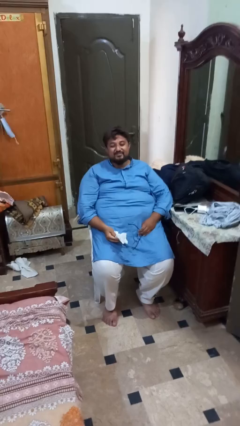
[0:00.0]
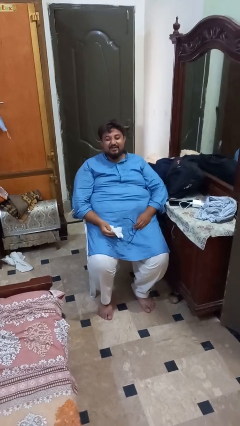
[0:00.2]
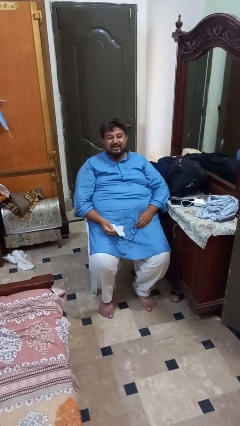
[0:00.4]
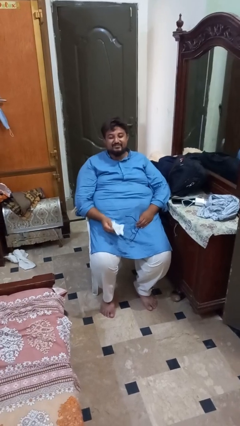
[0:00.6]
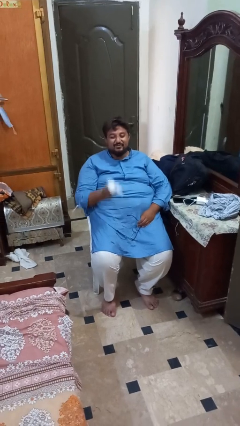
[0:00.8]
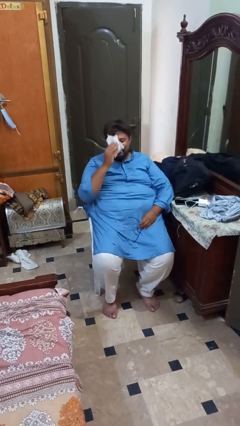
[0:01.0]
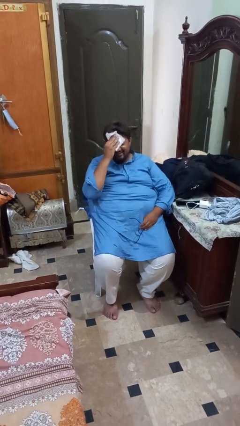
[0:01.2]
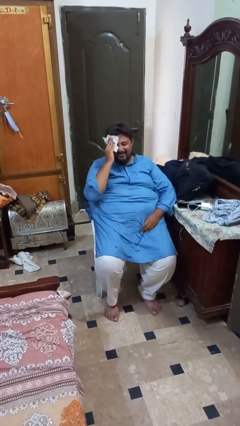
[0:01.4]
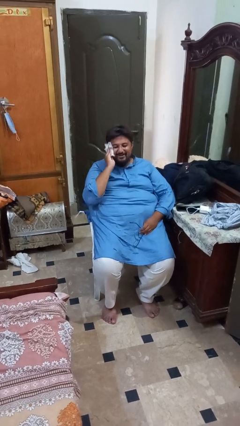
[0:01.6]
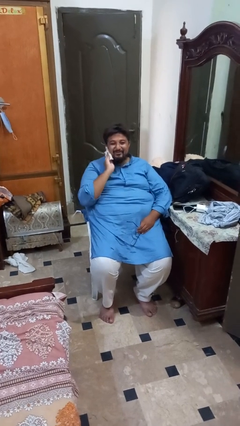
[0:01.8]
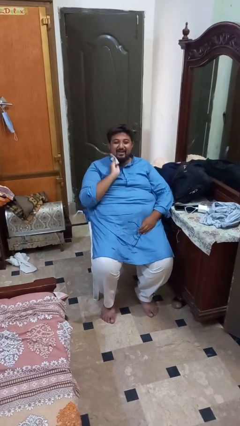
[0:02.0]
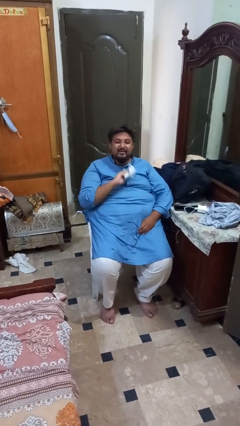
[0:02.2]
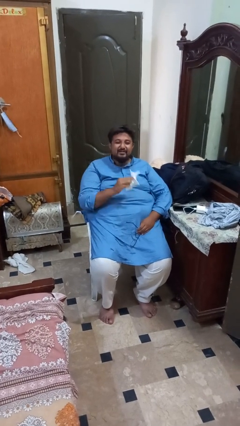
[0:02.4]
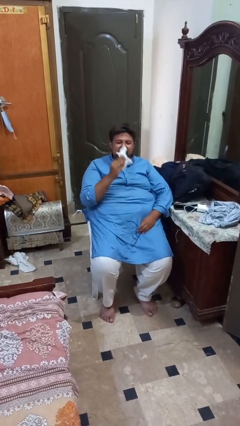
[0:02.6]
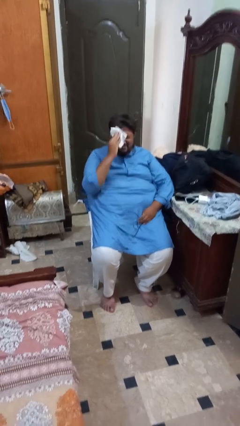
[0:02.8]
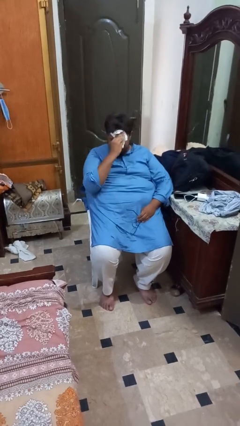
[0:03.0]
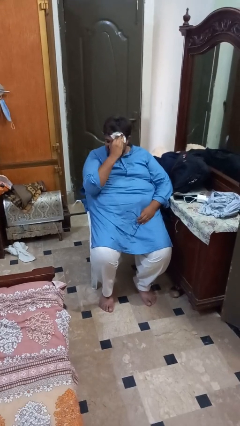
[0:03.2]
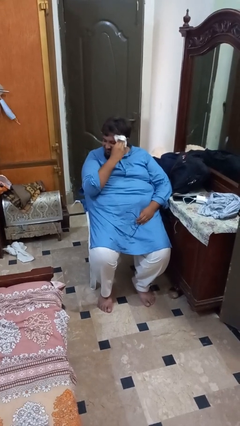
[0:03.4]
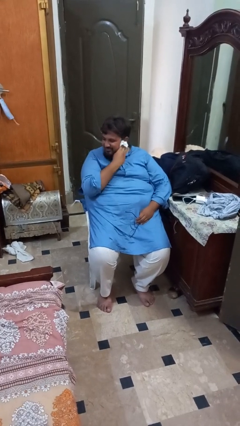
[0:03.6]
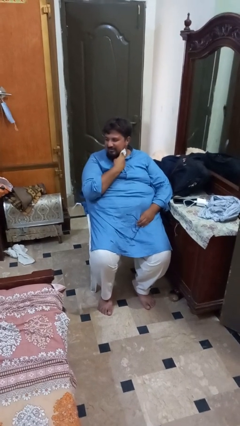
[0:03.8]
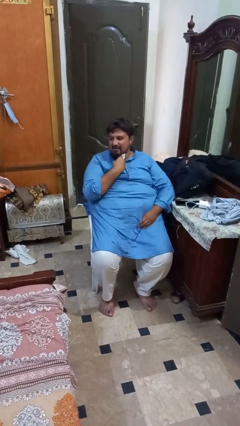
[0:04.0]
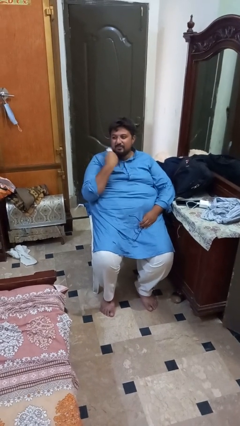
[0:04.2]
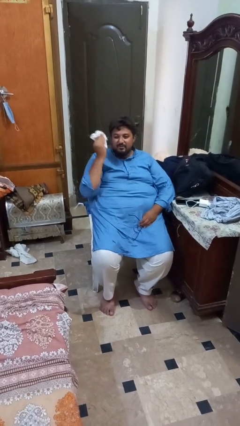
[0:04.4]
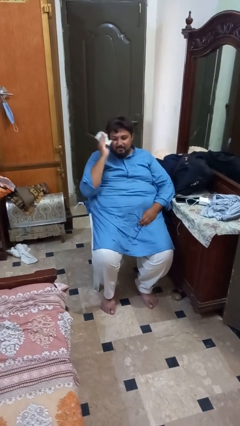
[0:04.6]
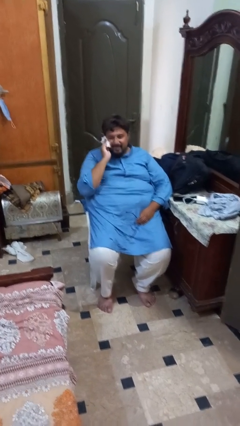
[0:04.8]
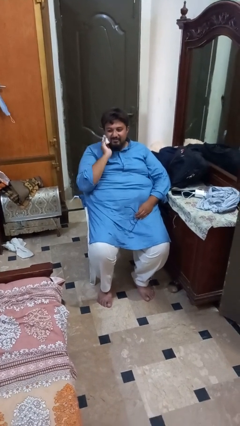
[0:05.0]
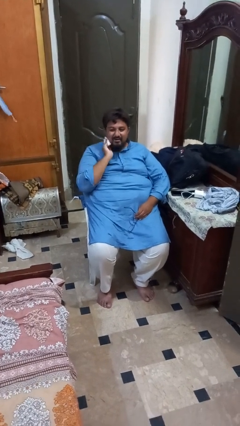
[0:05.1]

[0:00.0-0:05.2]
person wipes mouth with napkin

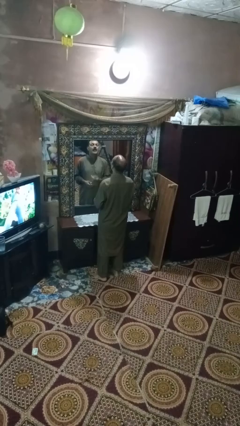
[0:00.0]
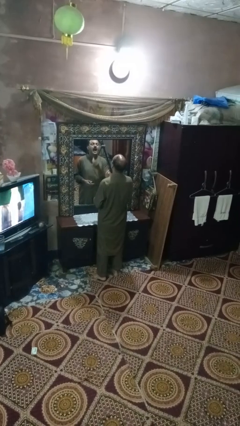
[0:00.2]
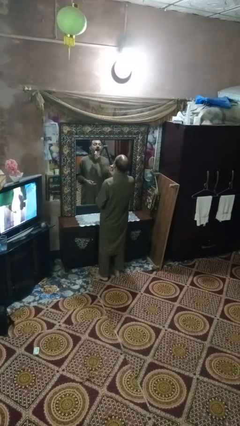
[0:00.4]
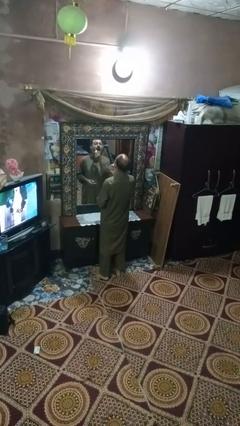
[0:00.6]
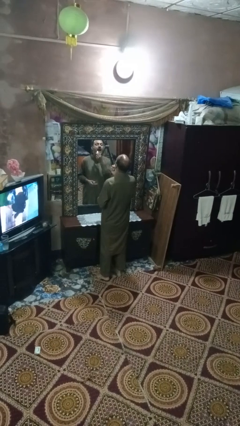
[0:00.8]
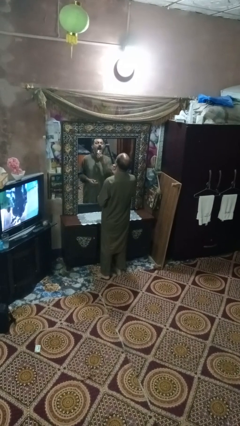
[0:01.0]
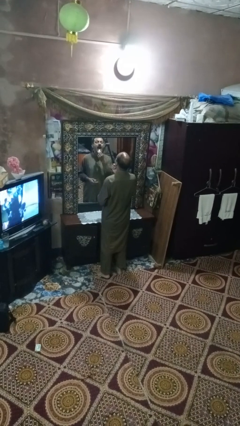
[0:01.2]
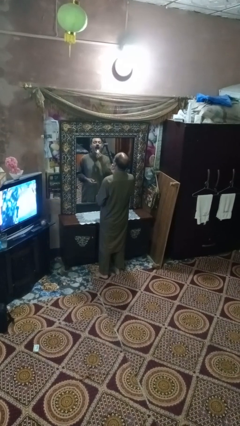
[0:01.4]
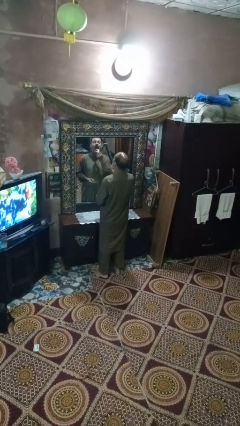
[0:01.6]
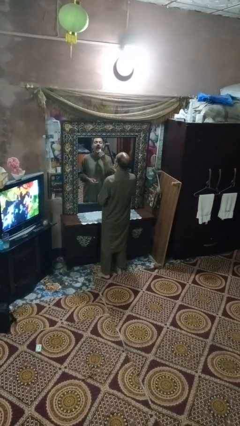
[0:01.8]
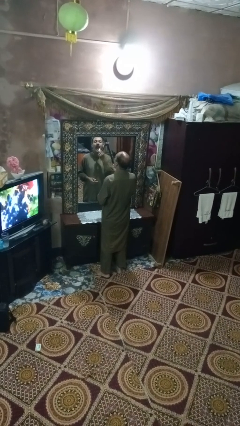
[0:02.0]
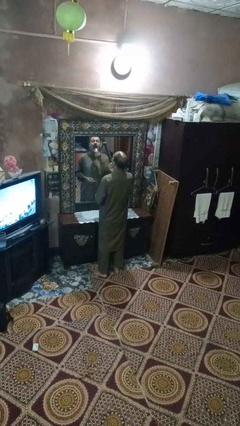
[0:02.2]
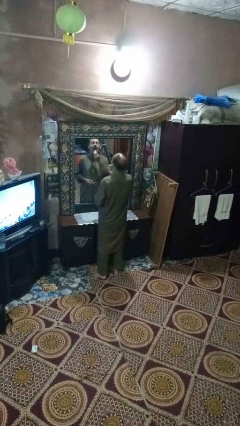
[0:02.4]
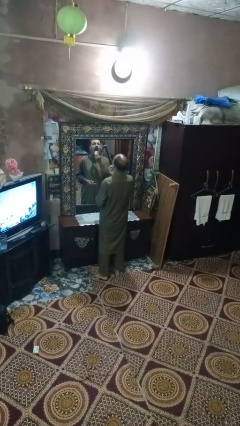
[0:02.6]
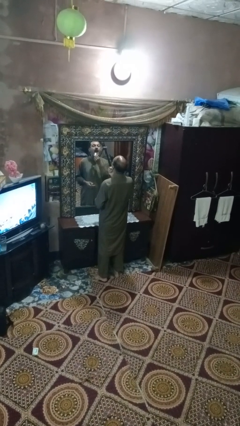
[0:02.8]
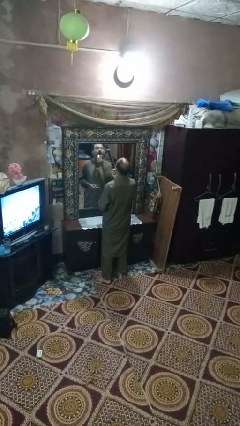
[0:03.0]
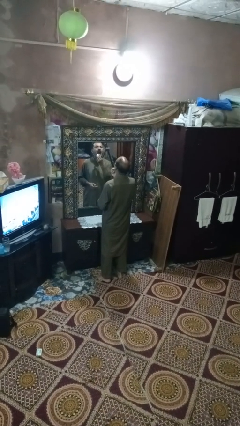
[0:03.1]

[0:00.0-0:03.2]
person applies lip makeup

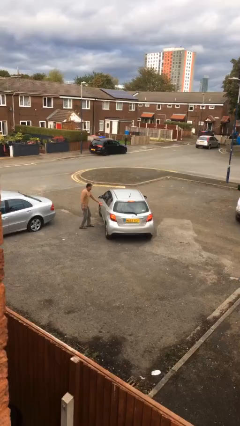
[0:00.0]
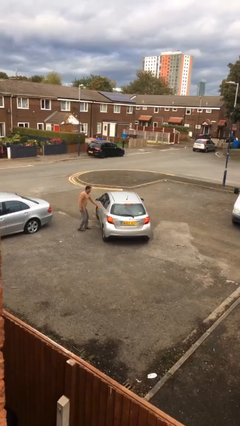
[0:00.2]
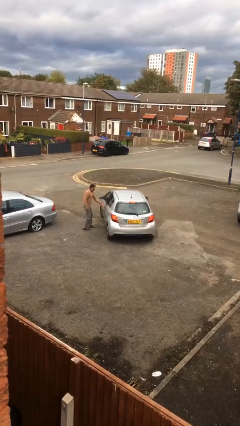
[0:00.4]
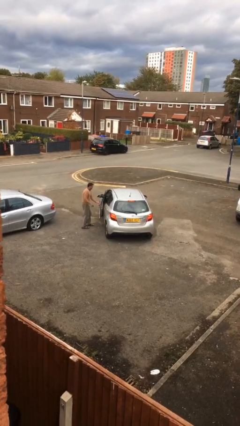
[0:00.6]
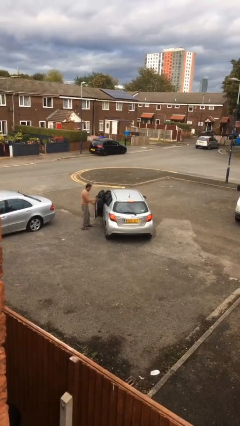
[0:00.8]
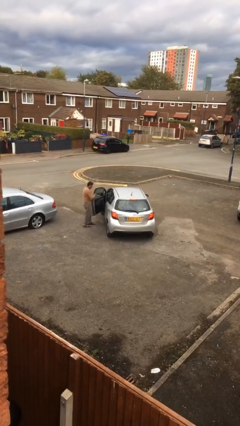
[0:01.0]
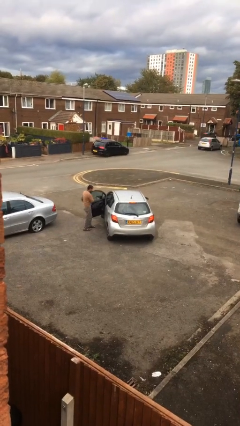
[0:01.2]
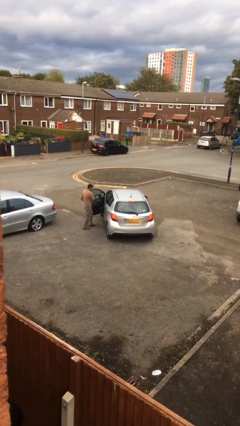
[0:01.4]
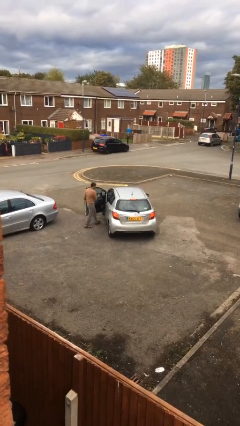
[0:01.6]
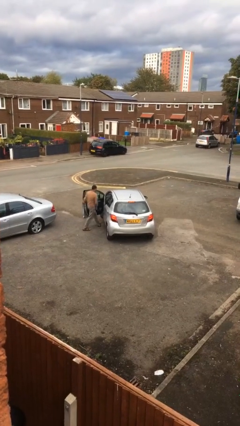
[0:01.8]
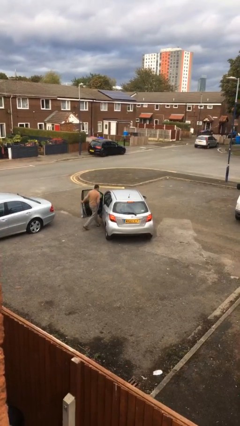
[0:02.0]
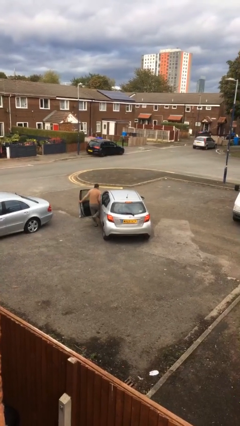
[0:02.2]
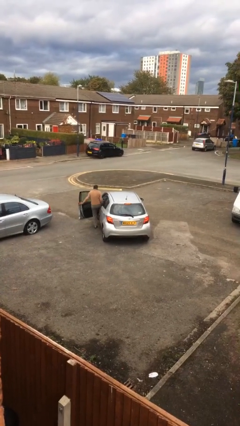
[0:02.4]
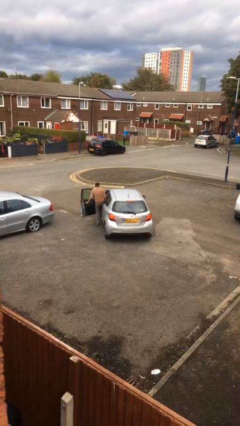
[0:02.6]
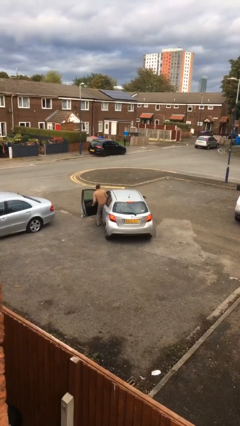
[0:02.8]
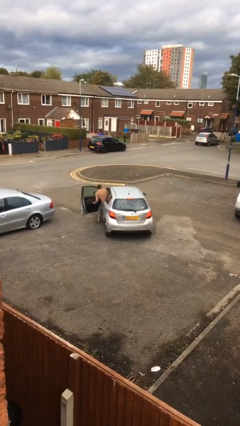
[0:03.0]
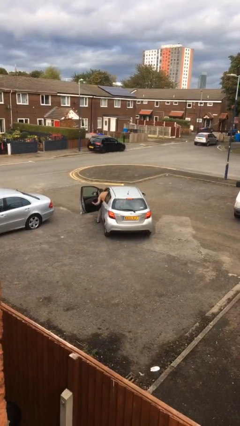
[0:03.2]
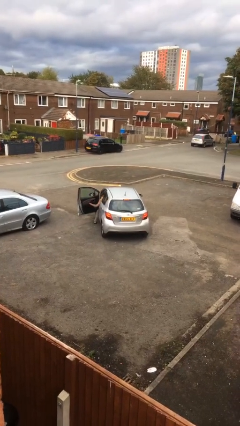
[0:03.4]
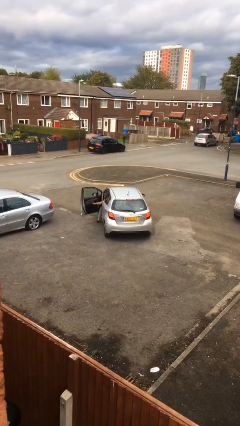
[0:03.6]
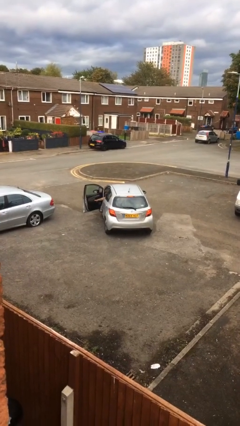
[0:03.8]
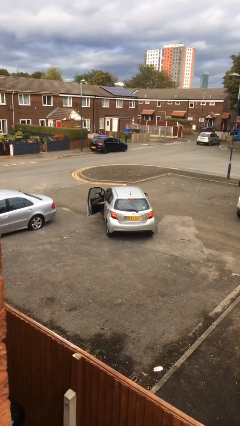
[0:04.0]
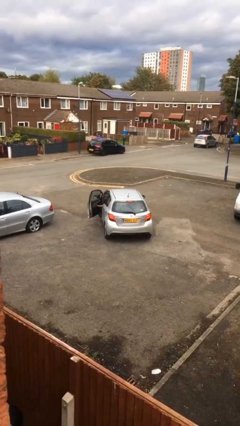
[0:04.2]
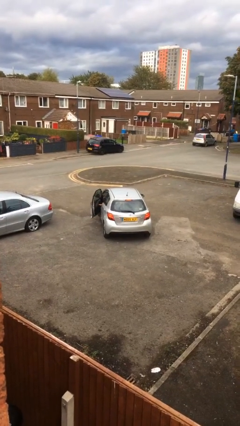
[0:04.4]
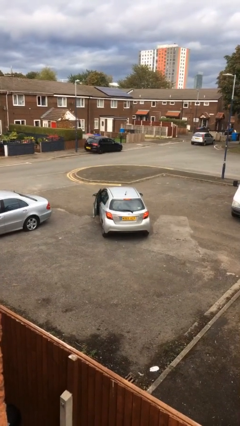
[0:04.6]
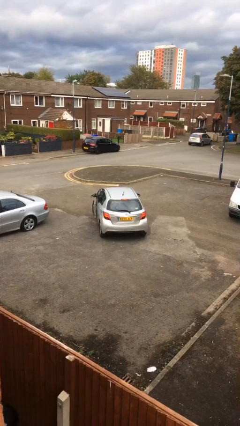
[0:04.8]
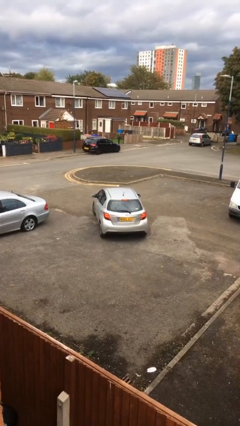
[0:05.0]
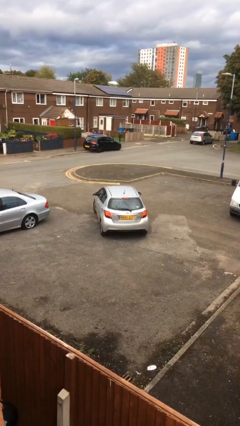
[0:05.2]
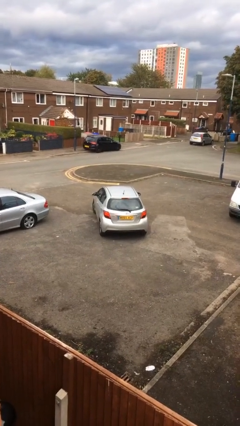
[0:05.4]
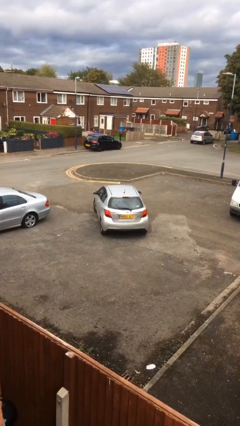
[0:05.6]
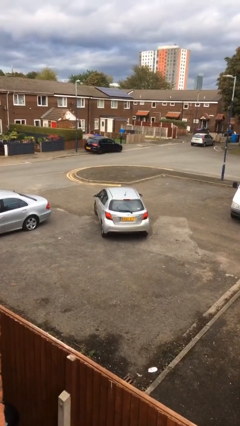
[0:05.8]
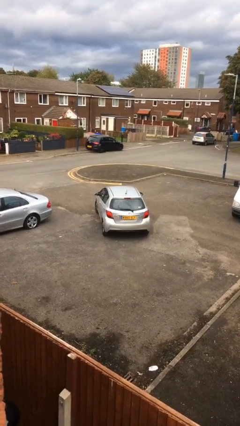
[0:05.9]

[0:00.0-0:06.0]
car picks up person

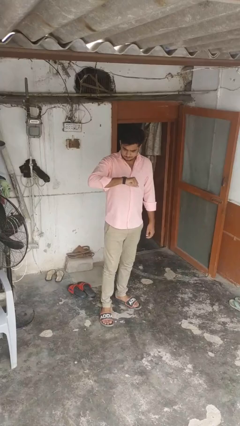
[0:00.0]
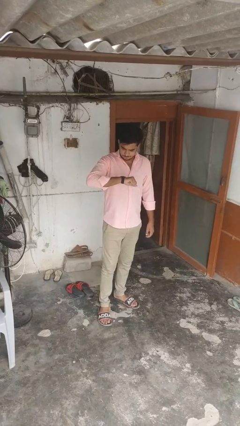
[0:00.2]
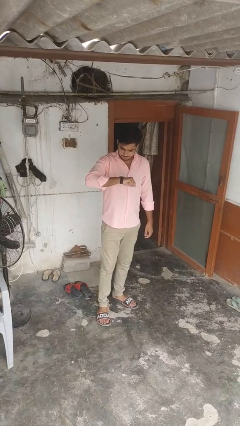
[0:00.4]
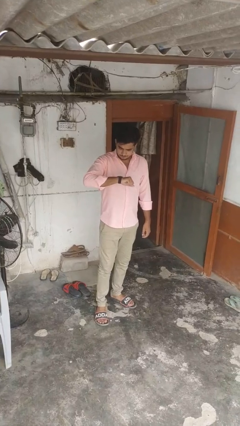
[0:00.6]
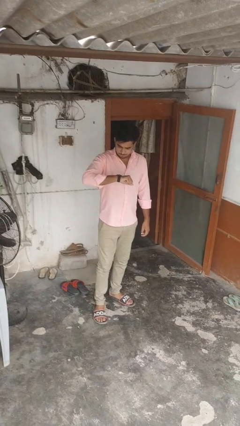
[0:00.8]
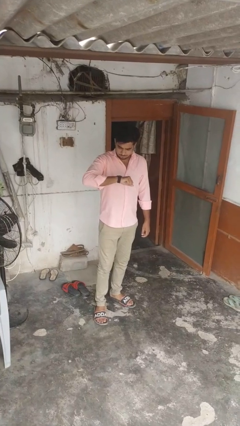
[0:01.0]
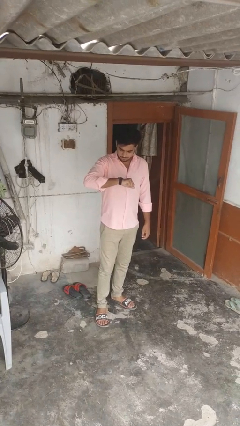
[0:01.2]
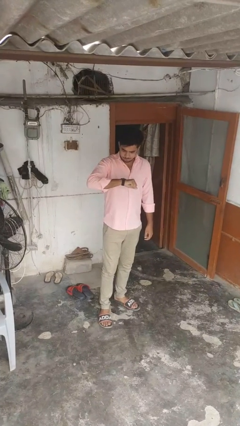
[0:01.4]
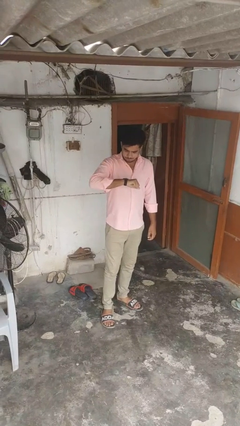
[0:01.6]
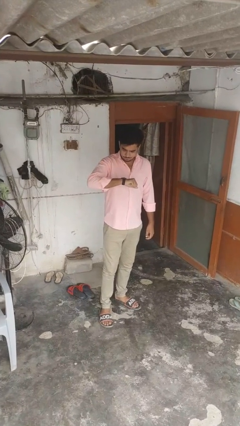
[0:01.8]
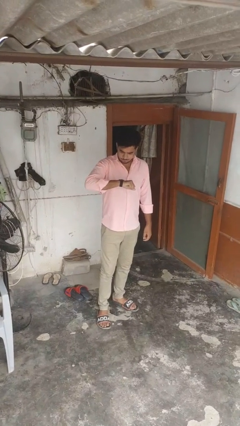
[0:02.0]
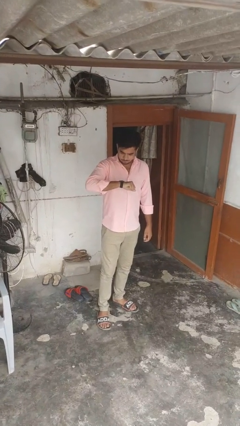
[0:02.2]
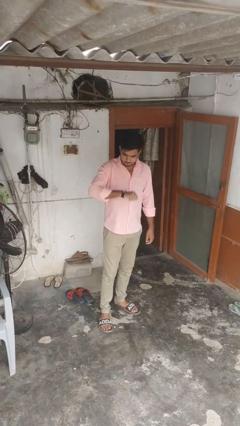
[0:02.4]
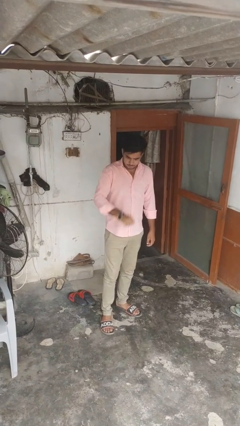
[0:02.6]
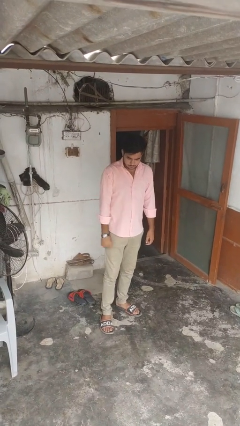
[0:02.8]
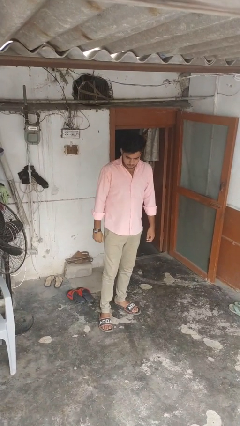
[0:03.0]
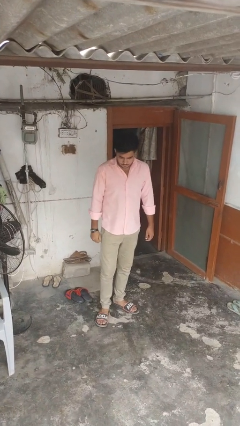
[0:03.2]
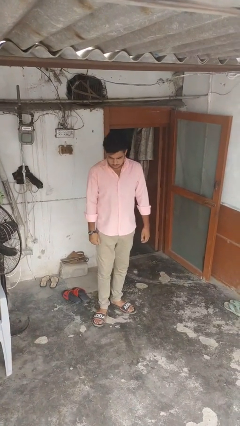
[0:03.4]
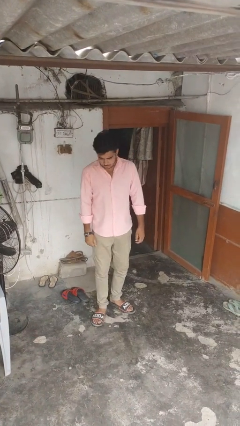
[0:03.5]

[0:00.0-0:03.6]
person looks at wristwatch
